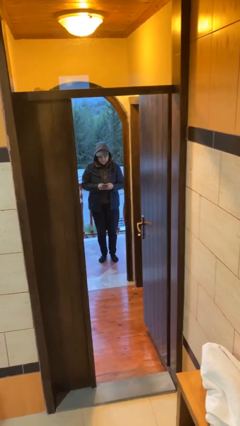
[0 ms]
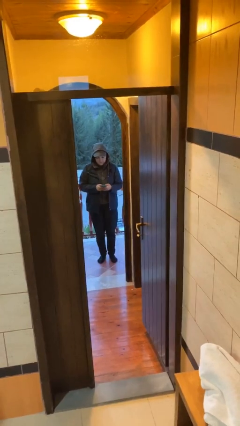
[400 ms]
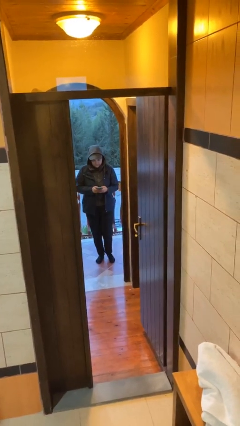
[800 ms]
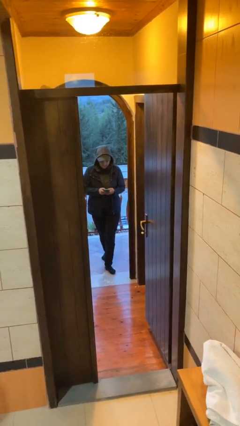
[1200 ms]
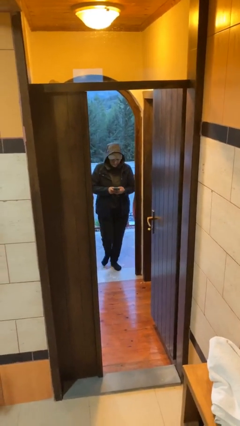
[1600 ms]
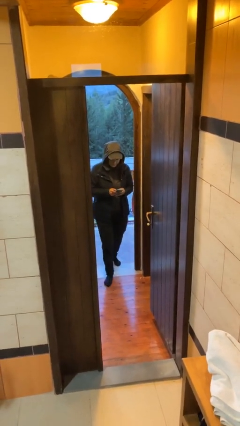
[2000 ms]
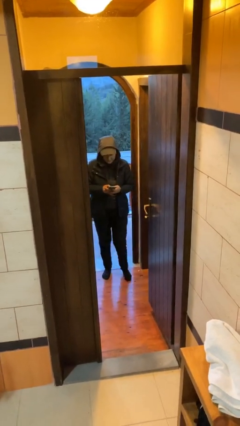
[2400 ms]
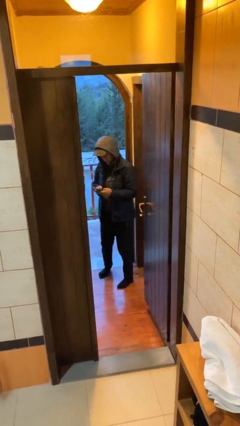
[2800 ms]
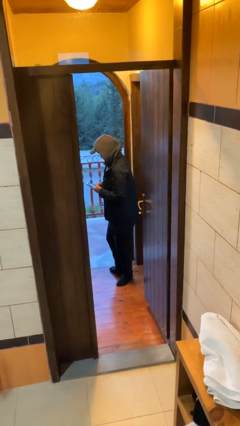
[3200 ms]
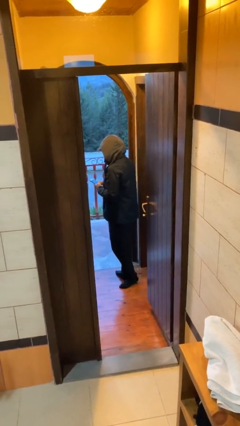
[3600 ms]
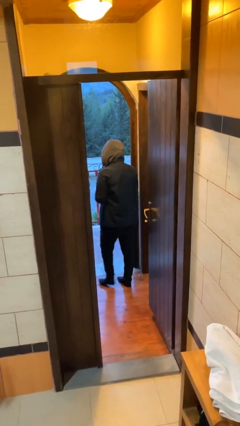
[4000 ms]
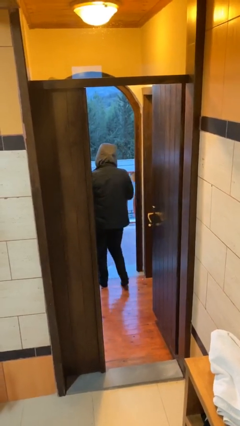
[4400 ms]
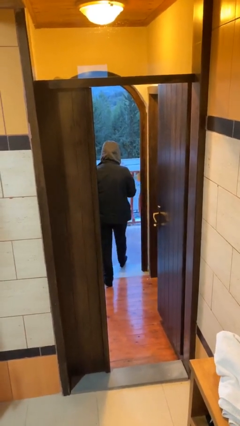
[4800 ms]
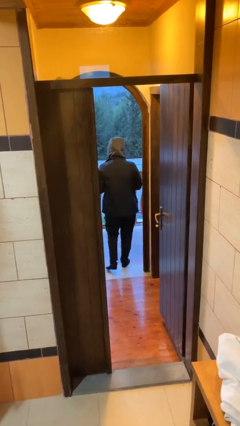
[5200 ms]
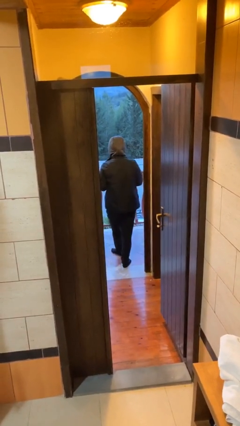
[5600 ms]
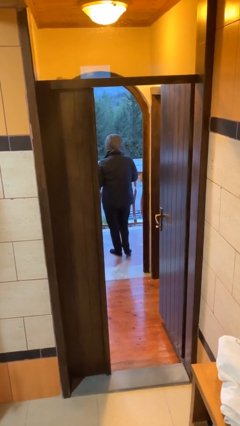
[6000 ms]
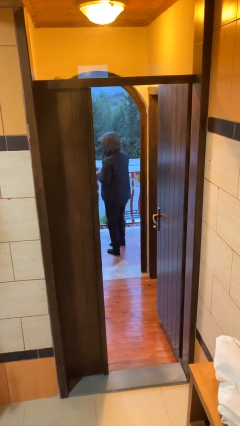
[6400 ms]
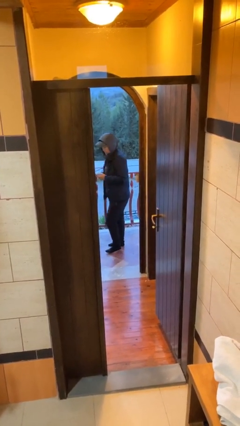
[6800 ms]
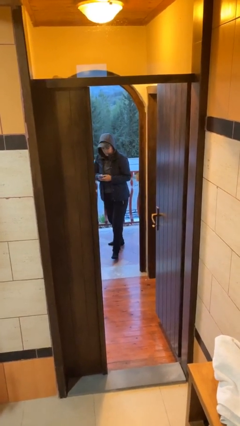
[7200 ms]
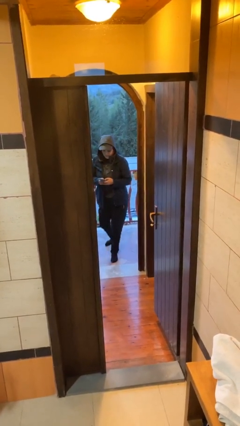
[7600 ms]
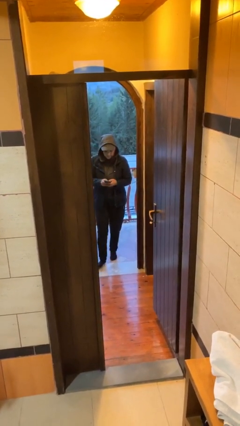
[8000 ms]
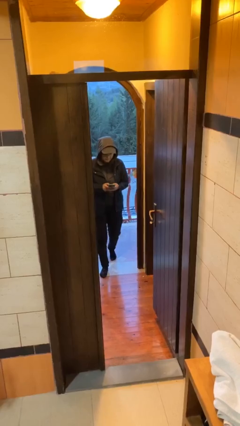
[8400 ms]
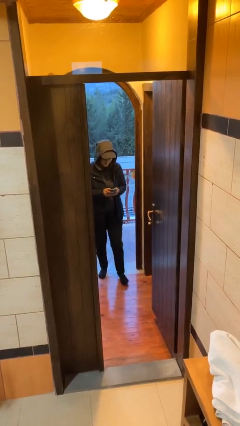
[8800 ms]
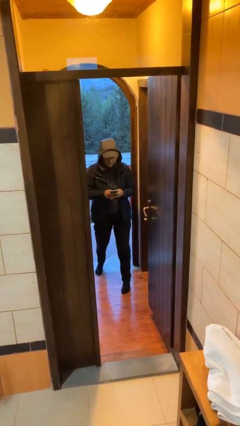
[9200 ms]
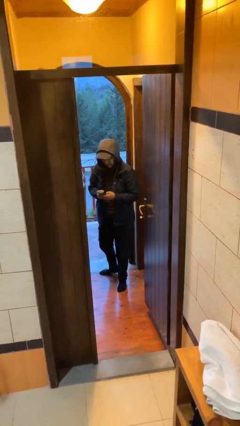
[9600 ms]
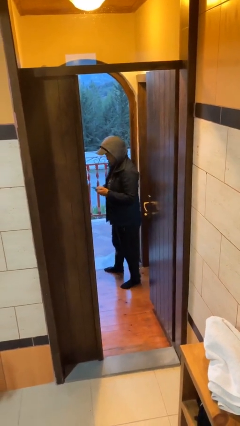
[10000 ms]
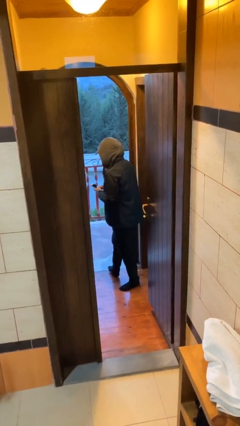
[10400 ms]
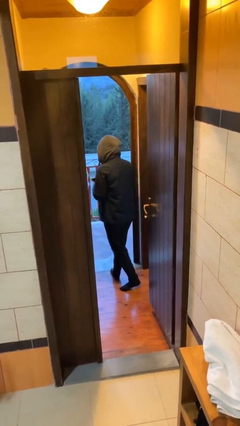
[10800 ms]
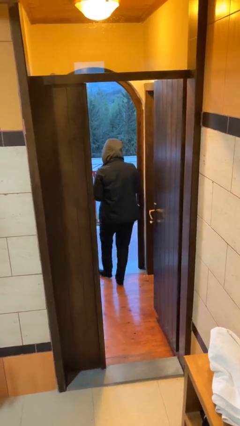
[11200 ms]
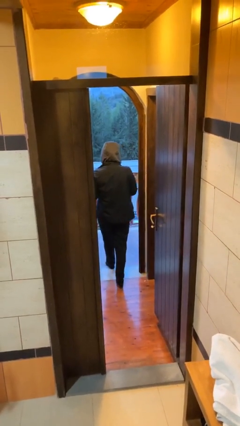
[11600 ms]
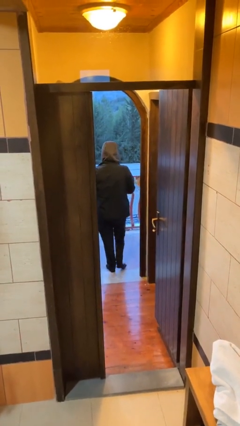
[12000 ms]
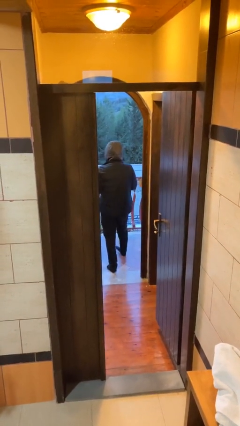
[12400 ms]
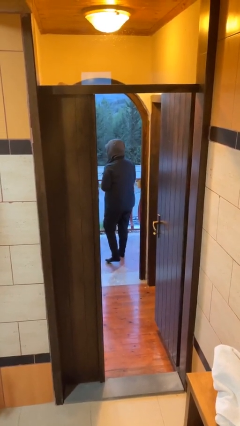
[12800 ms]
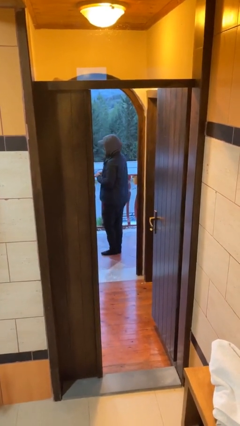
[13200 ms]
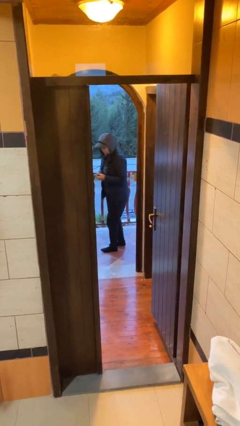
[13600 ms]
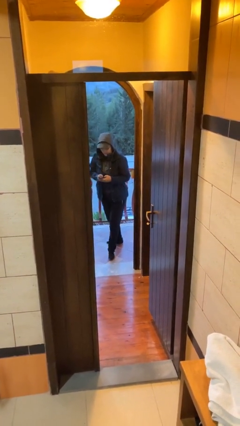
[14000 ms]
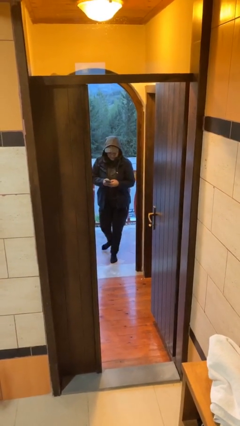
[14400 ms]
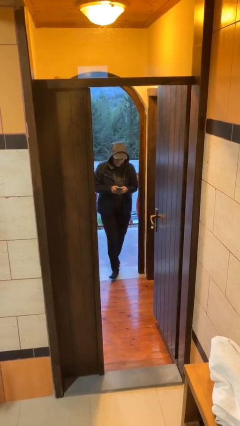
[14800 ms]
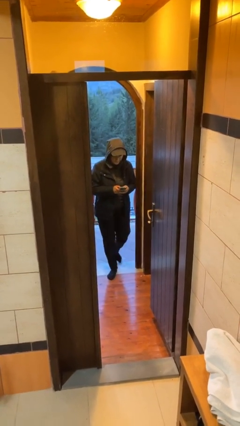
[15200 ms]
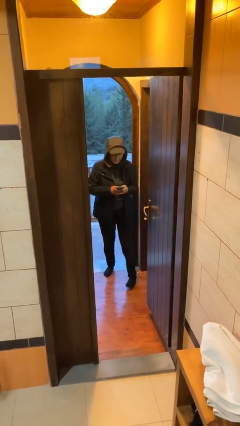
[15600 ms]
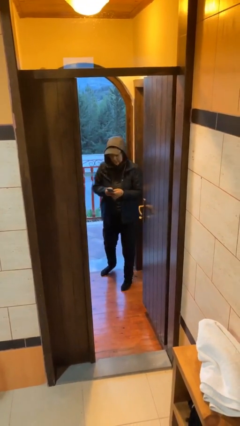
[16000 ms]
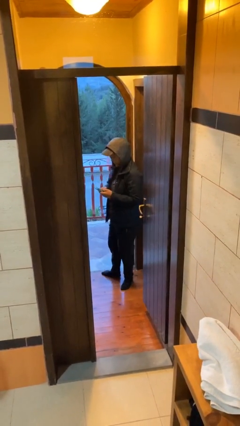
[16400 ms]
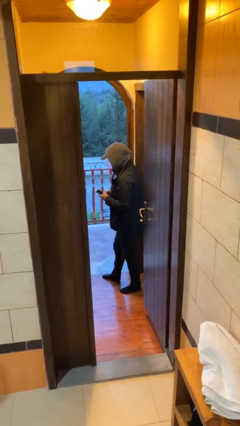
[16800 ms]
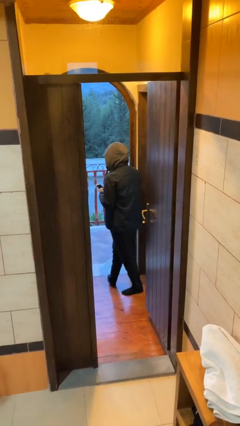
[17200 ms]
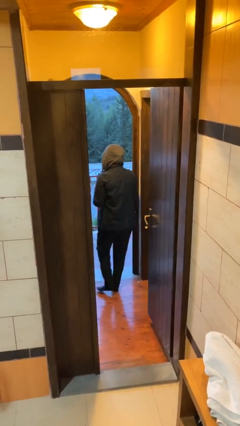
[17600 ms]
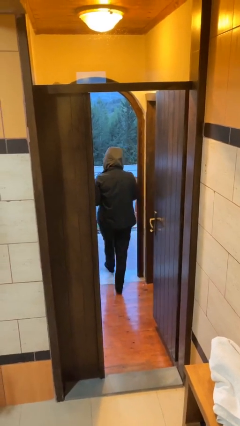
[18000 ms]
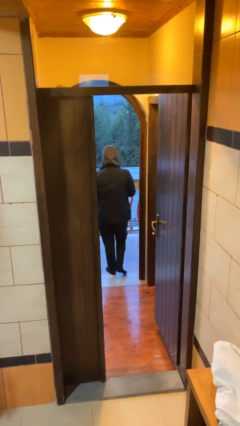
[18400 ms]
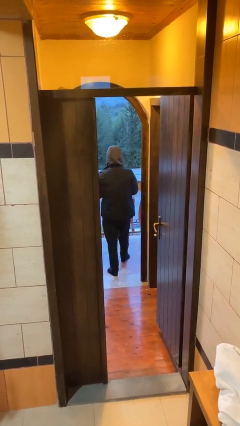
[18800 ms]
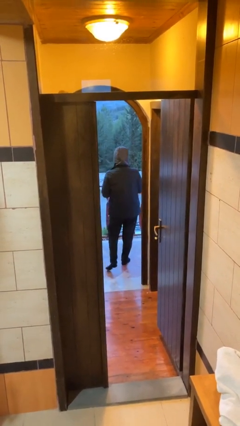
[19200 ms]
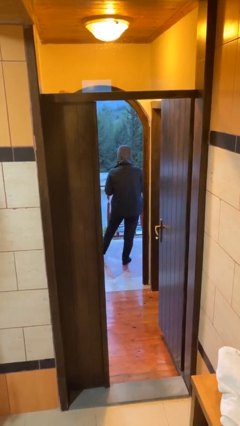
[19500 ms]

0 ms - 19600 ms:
person texts on phone

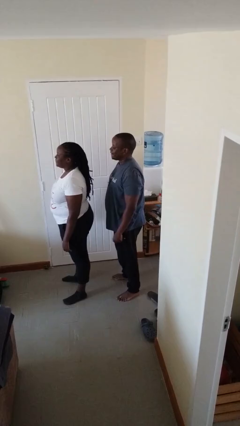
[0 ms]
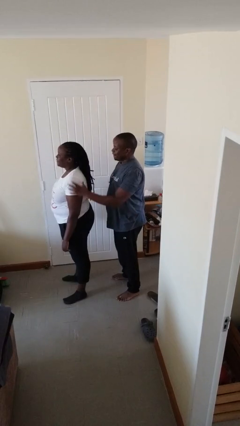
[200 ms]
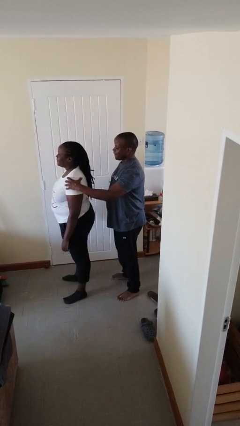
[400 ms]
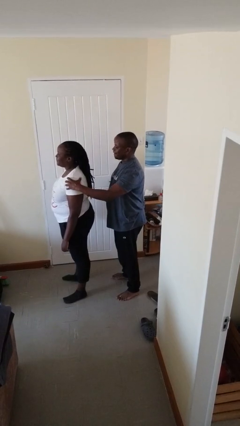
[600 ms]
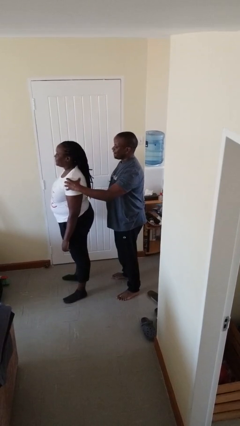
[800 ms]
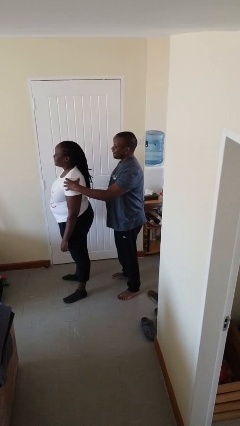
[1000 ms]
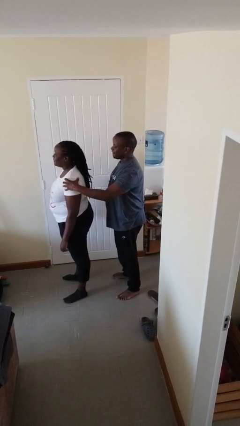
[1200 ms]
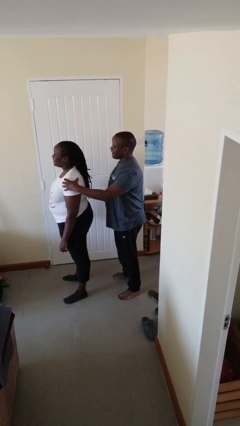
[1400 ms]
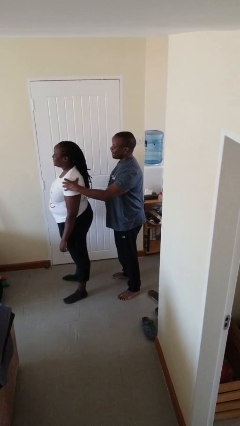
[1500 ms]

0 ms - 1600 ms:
person grabs person by shoulder

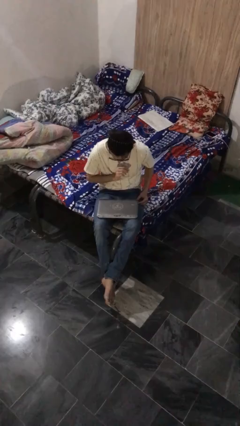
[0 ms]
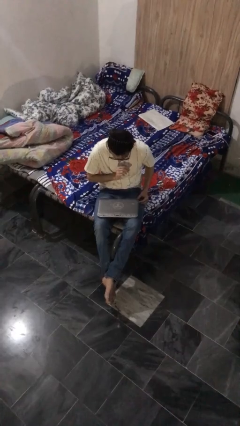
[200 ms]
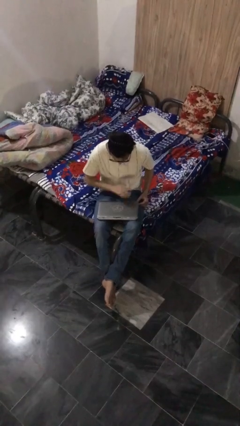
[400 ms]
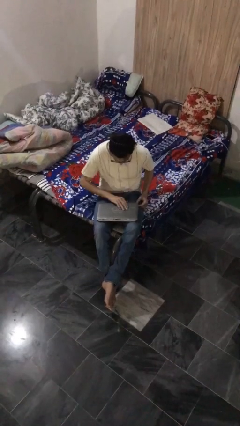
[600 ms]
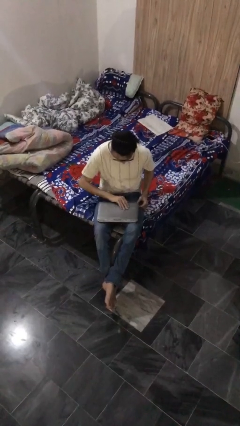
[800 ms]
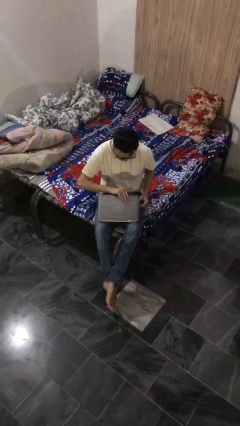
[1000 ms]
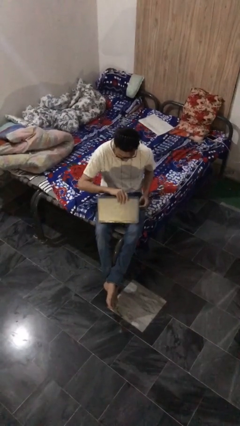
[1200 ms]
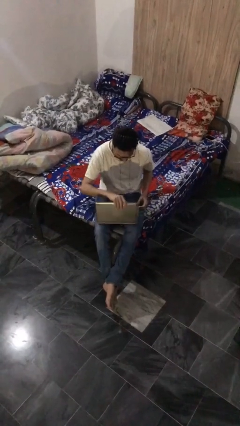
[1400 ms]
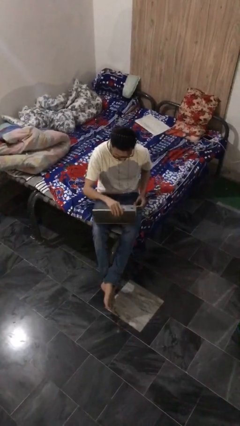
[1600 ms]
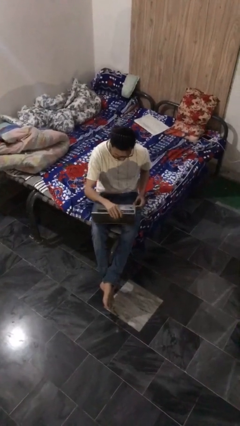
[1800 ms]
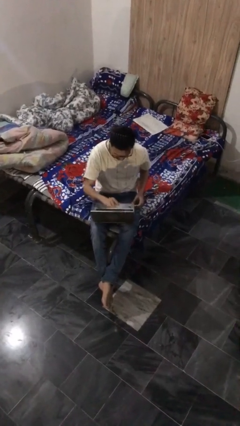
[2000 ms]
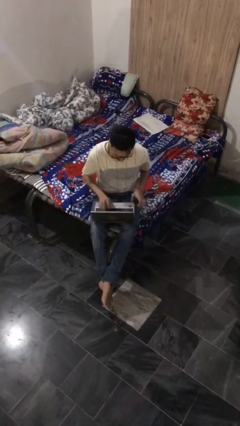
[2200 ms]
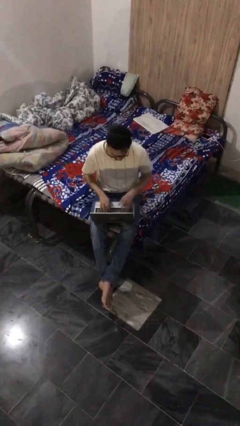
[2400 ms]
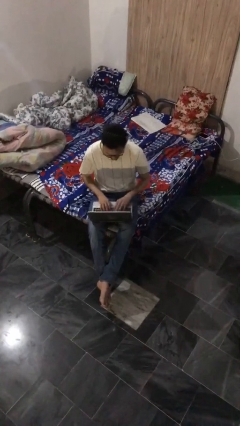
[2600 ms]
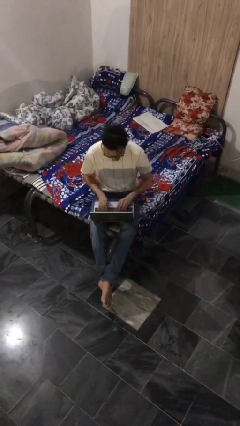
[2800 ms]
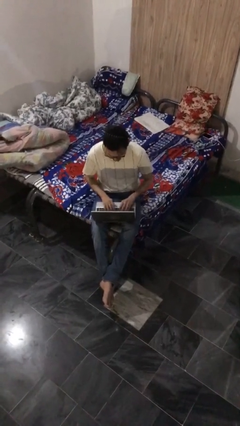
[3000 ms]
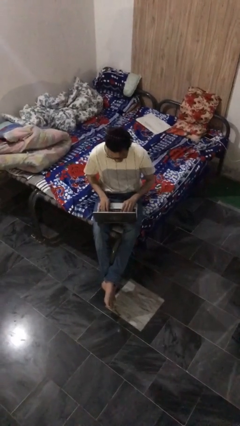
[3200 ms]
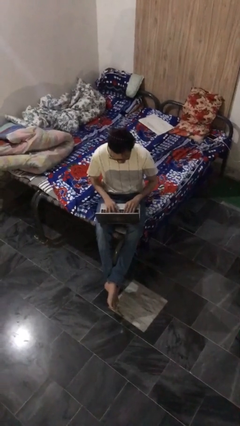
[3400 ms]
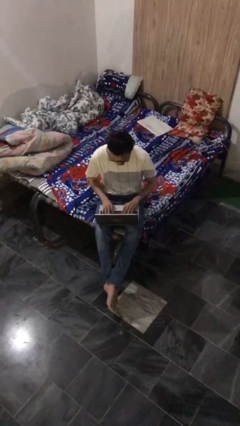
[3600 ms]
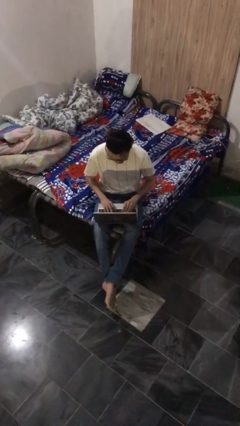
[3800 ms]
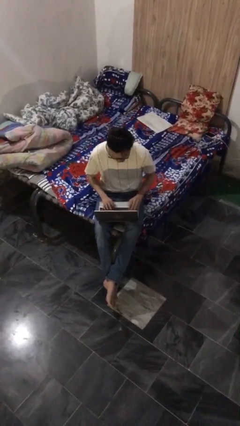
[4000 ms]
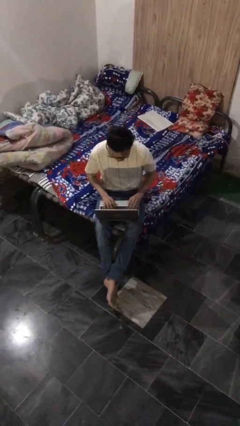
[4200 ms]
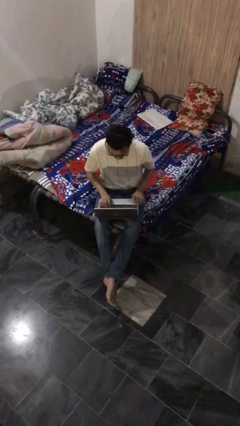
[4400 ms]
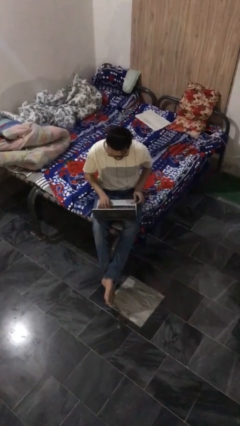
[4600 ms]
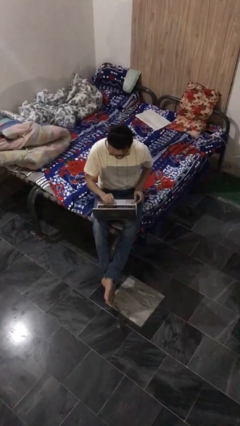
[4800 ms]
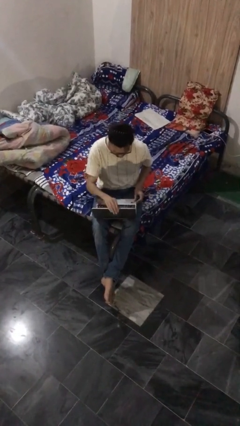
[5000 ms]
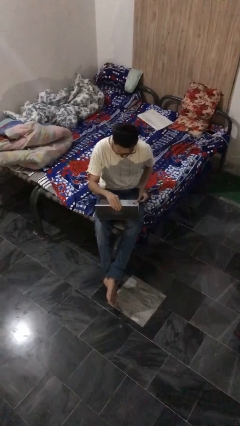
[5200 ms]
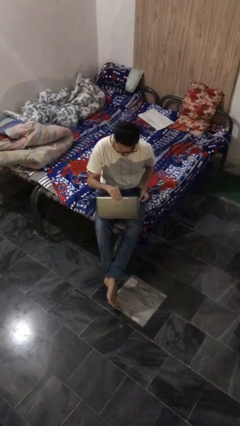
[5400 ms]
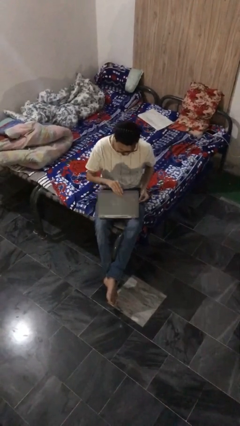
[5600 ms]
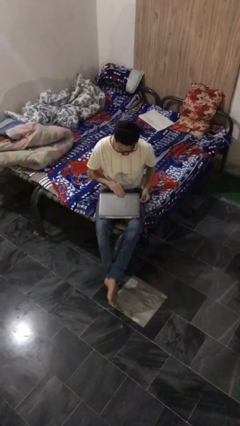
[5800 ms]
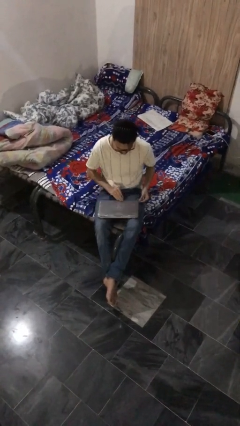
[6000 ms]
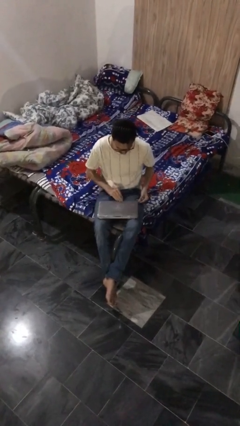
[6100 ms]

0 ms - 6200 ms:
person interacts with laptop

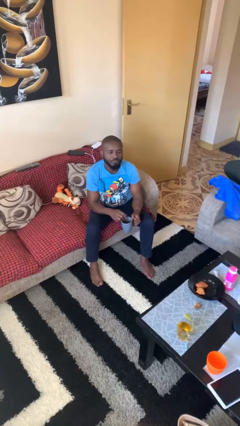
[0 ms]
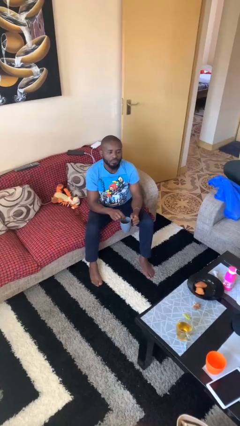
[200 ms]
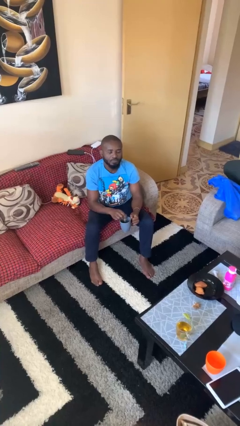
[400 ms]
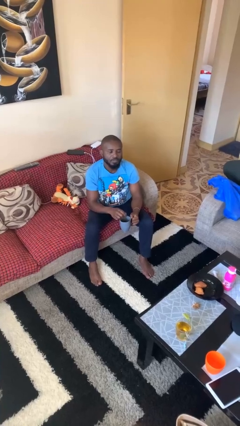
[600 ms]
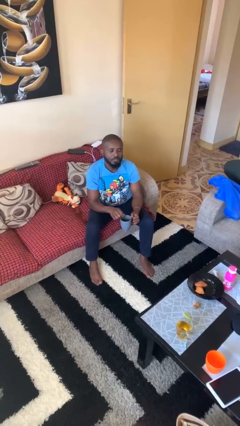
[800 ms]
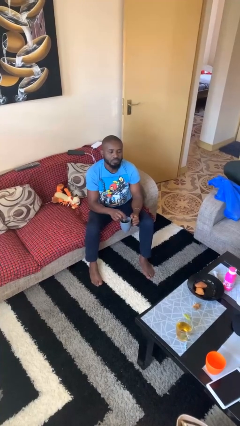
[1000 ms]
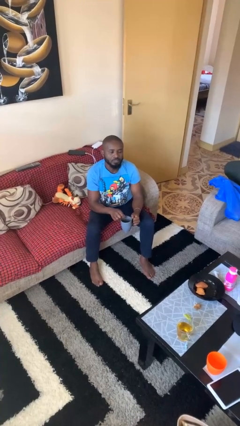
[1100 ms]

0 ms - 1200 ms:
person stirs mug
